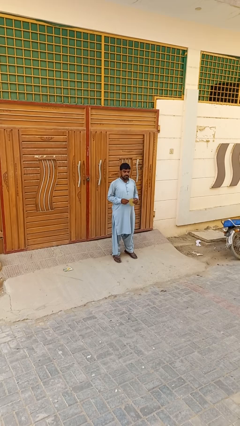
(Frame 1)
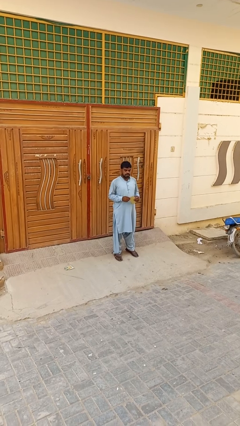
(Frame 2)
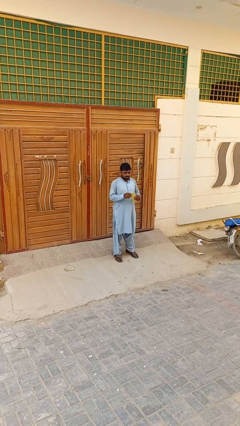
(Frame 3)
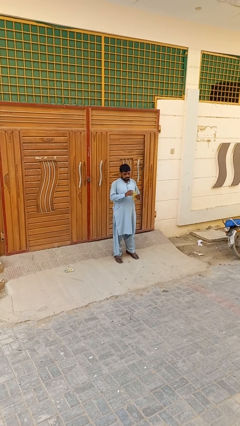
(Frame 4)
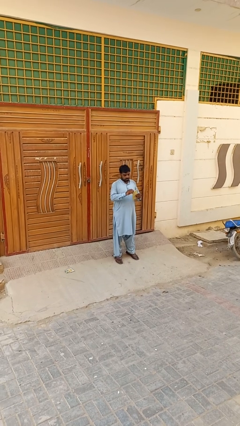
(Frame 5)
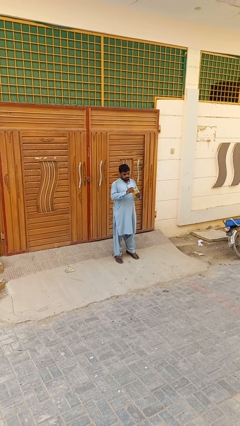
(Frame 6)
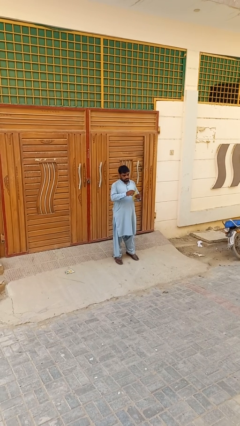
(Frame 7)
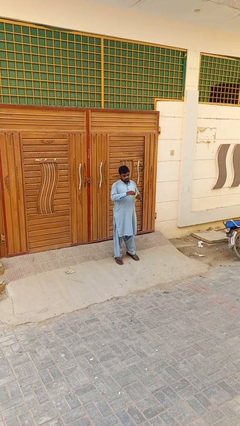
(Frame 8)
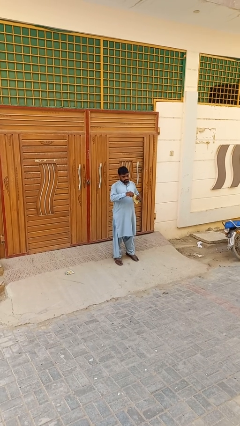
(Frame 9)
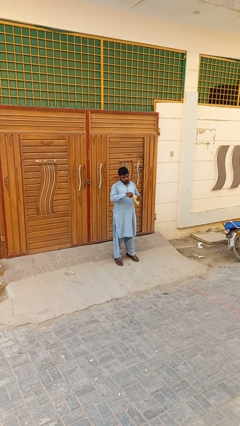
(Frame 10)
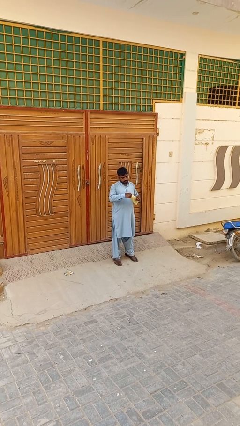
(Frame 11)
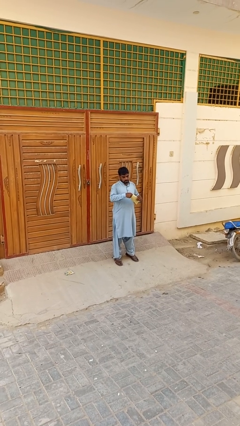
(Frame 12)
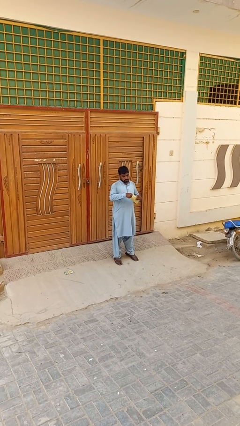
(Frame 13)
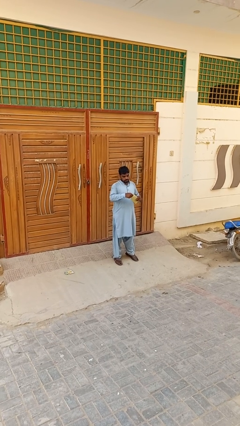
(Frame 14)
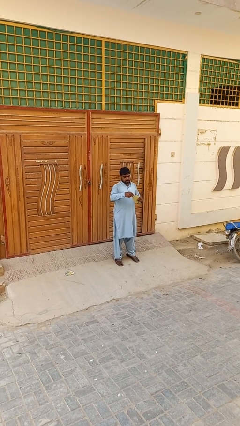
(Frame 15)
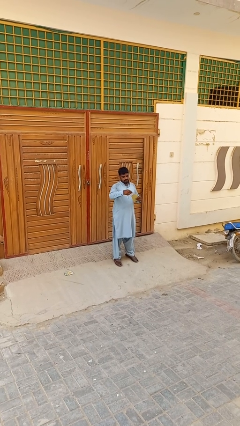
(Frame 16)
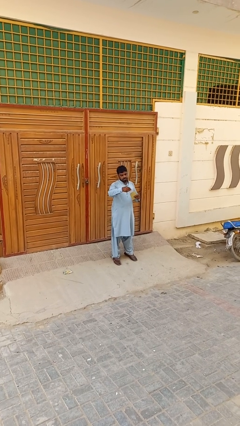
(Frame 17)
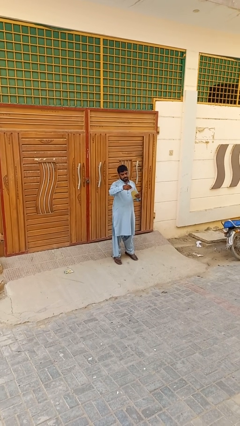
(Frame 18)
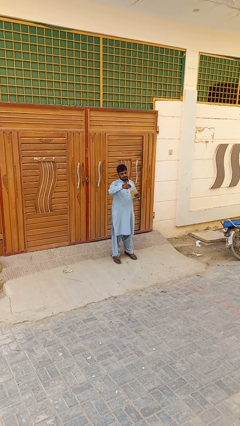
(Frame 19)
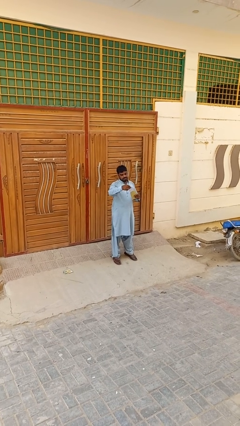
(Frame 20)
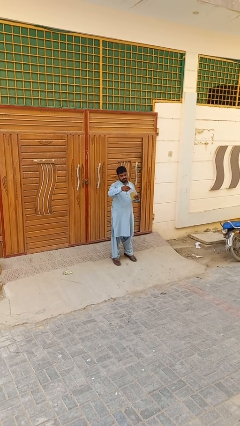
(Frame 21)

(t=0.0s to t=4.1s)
person opens mailbox

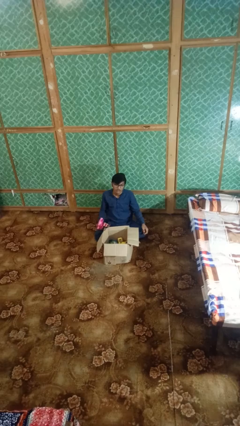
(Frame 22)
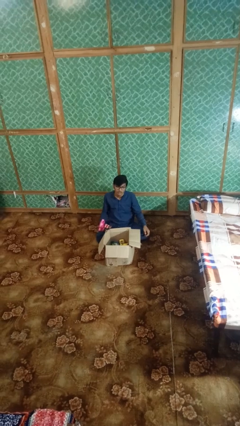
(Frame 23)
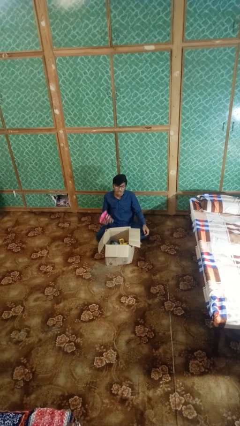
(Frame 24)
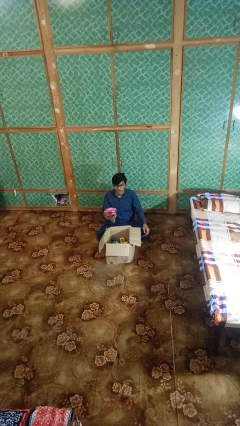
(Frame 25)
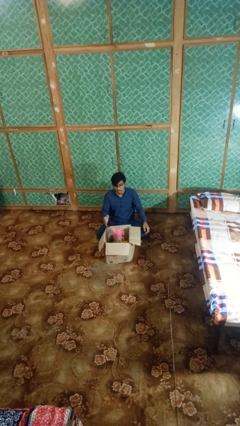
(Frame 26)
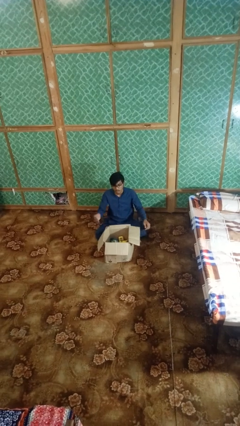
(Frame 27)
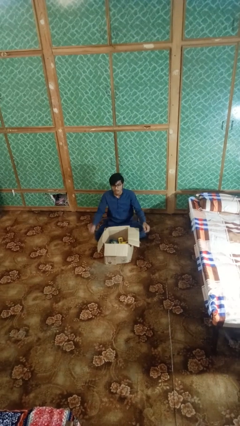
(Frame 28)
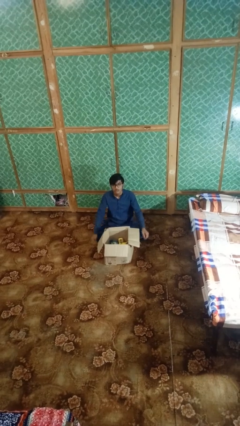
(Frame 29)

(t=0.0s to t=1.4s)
person puts object into box

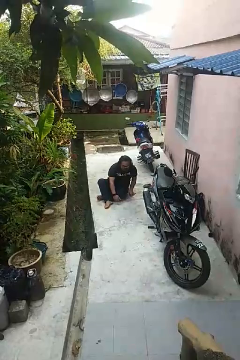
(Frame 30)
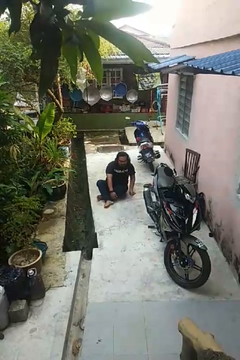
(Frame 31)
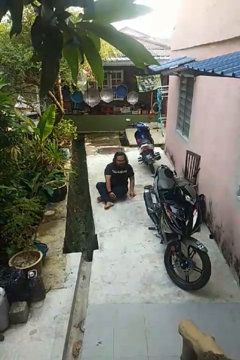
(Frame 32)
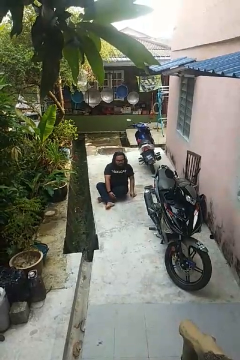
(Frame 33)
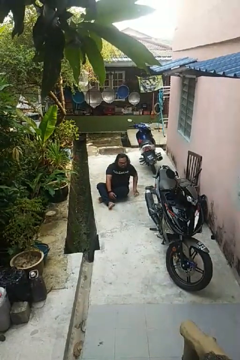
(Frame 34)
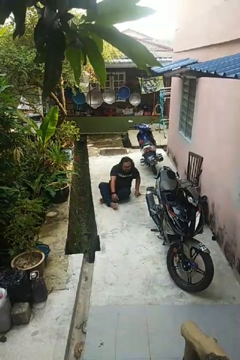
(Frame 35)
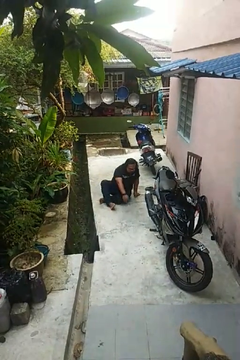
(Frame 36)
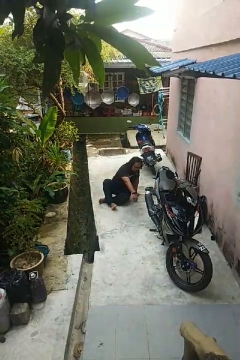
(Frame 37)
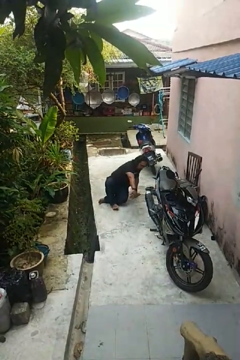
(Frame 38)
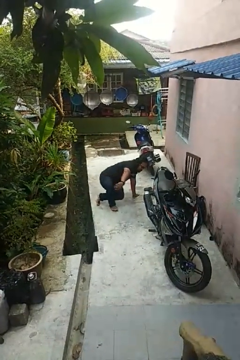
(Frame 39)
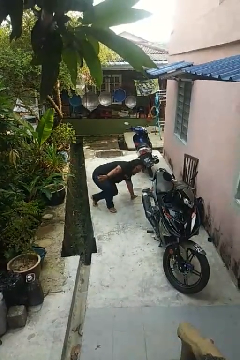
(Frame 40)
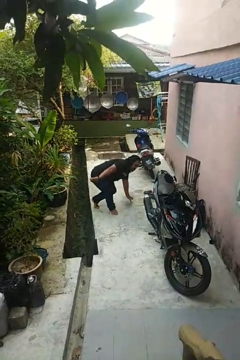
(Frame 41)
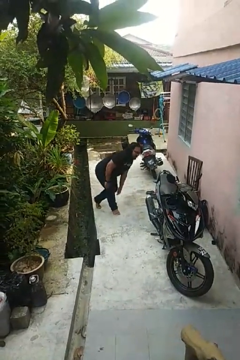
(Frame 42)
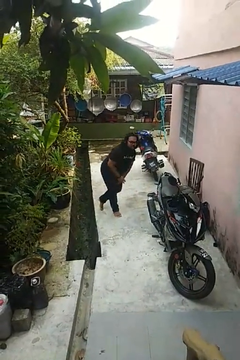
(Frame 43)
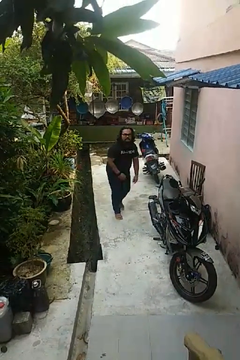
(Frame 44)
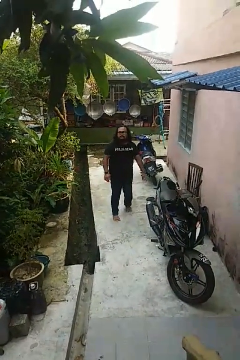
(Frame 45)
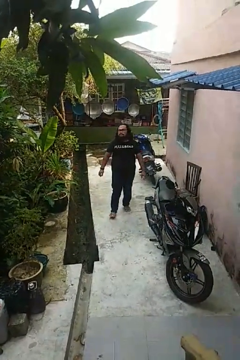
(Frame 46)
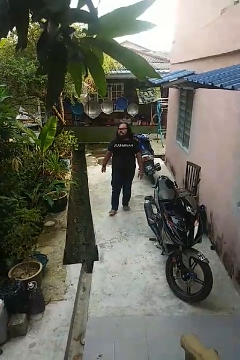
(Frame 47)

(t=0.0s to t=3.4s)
person stands up from floor

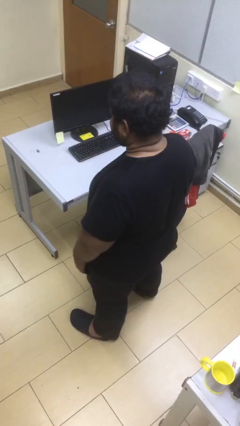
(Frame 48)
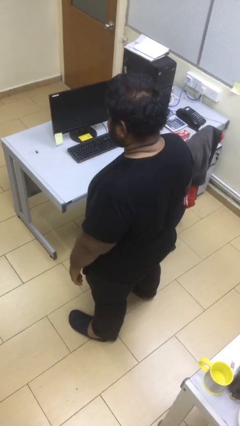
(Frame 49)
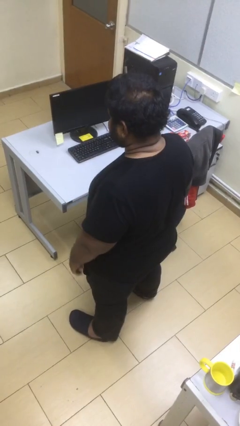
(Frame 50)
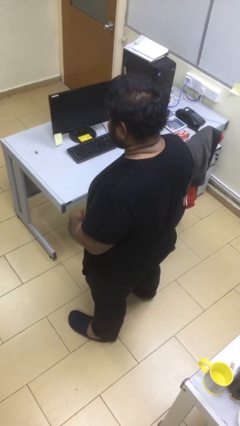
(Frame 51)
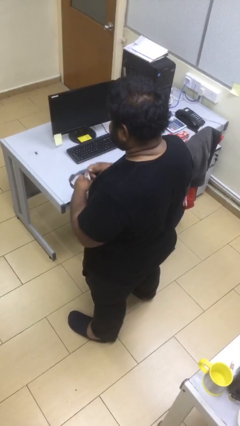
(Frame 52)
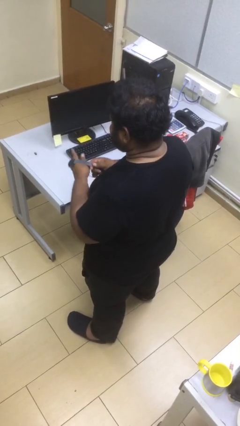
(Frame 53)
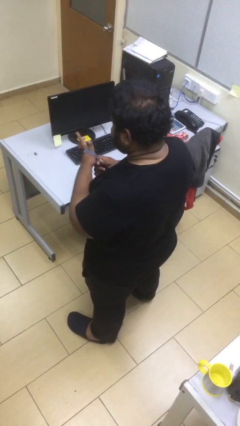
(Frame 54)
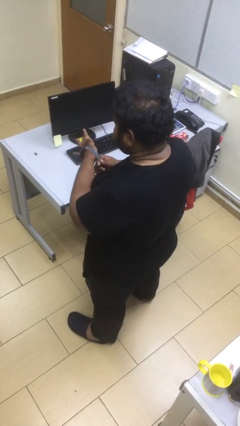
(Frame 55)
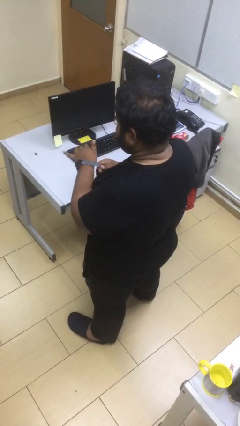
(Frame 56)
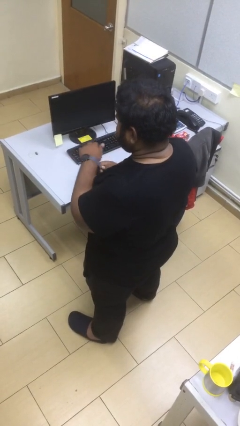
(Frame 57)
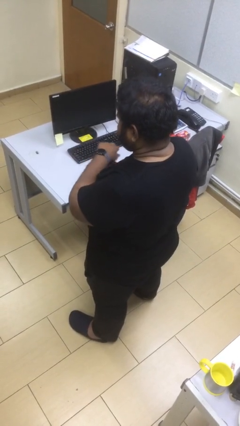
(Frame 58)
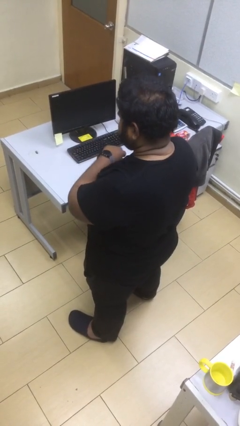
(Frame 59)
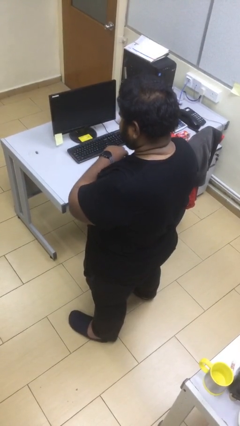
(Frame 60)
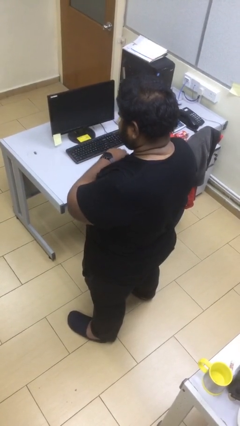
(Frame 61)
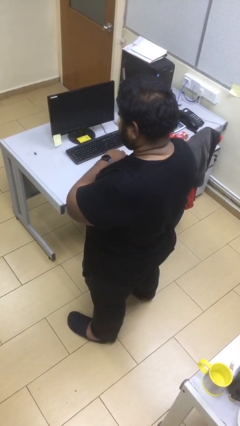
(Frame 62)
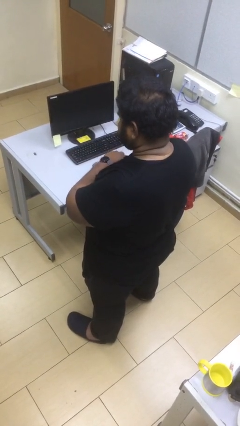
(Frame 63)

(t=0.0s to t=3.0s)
person puts on wristwatch

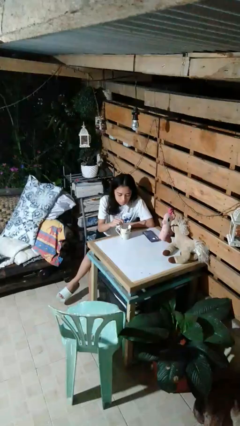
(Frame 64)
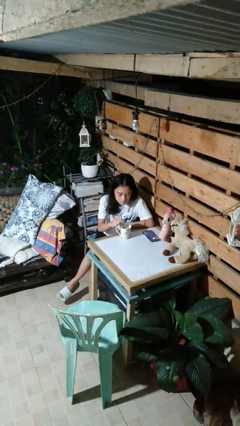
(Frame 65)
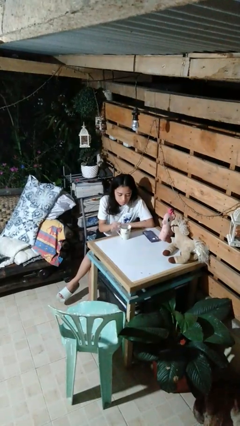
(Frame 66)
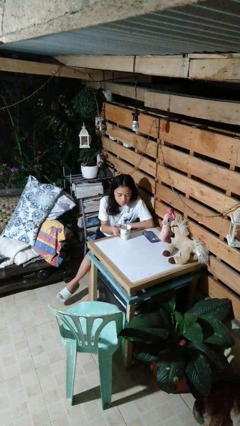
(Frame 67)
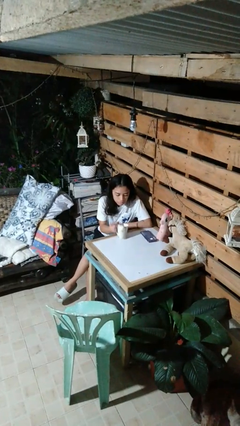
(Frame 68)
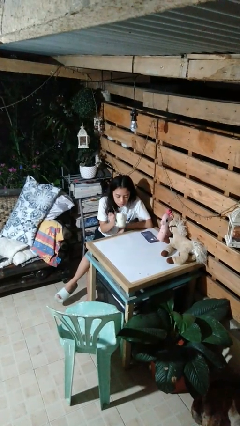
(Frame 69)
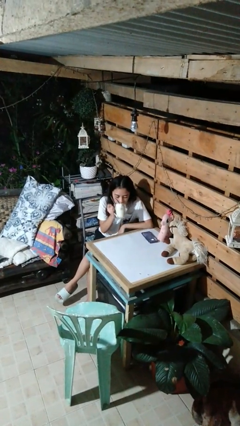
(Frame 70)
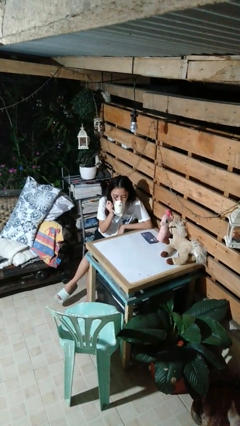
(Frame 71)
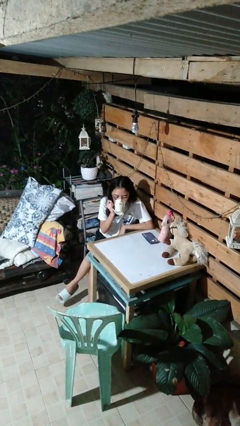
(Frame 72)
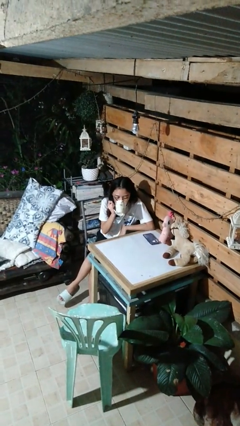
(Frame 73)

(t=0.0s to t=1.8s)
person drinks from mug

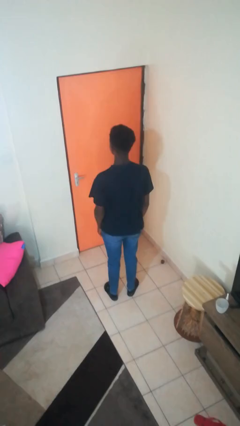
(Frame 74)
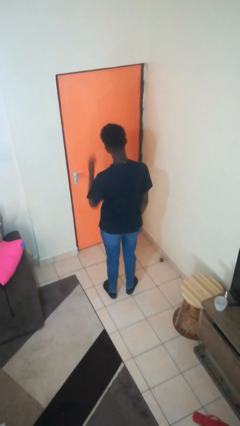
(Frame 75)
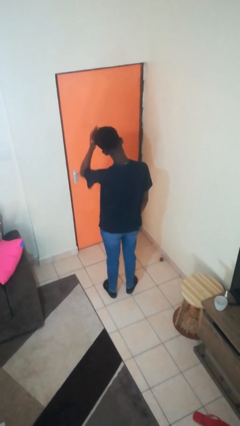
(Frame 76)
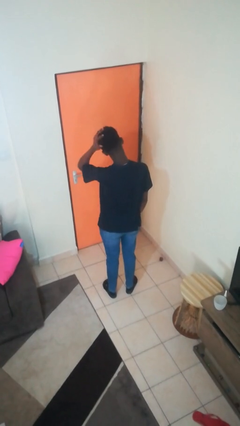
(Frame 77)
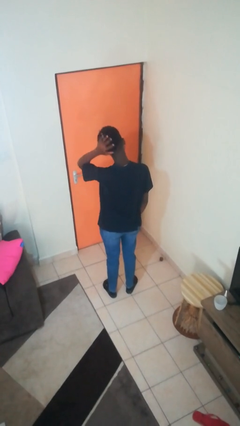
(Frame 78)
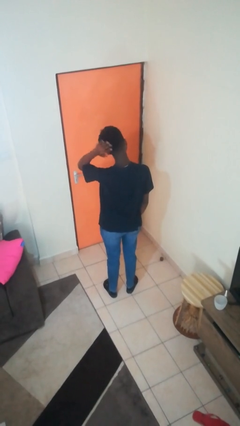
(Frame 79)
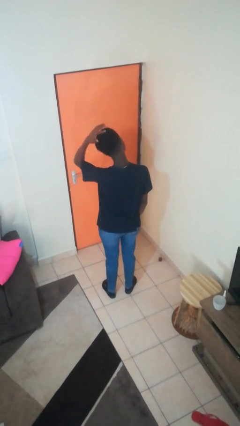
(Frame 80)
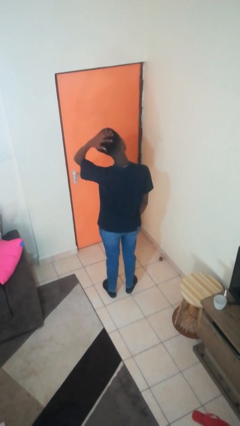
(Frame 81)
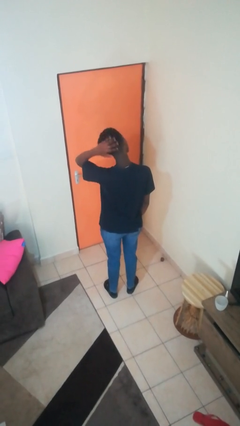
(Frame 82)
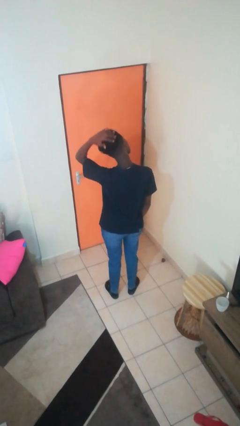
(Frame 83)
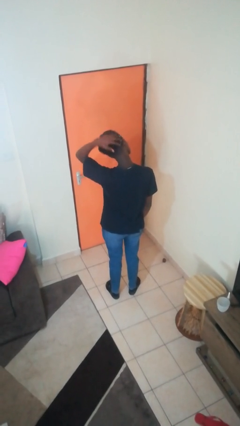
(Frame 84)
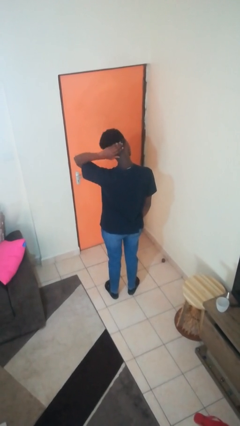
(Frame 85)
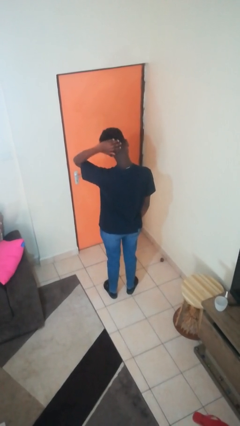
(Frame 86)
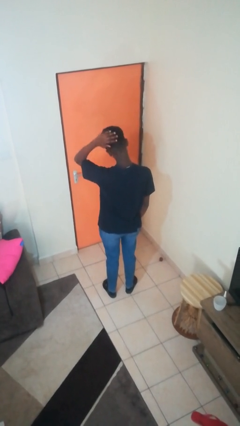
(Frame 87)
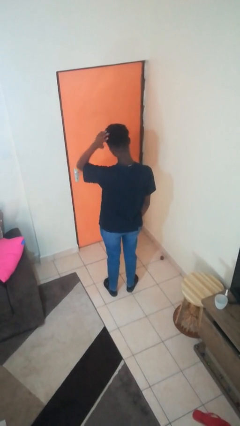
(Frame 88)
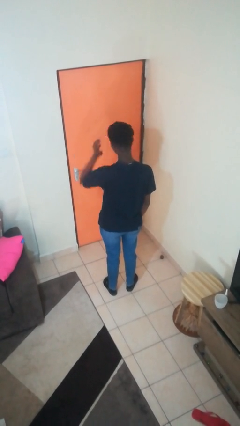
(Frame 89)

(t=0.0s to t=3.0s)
person strokes hair

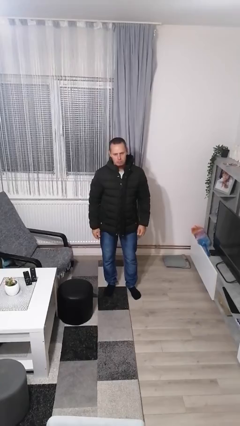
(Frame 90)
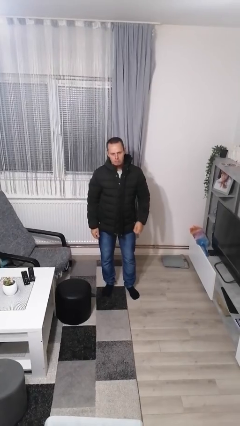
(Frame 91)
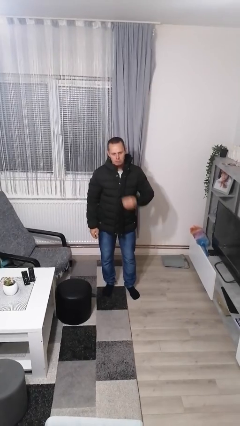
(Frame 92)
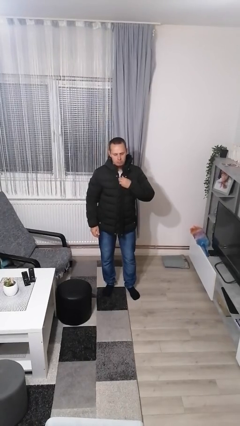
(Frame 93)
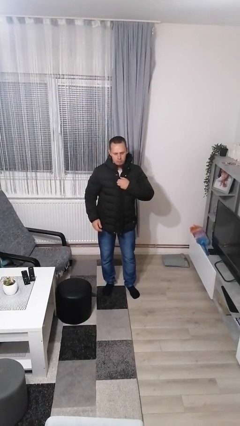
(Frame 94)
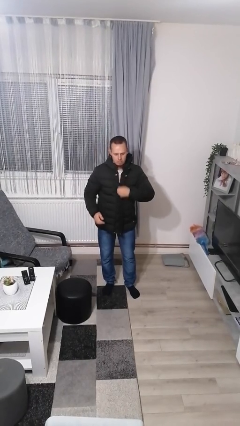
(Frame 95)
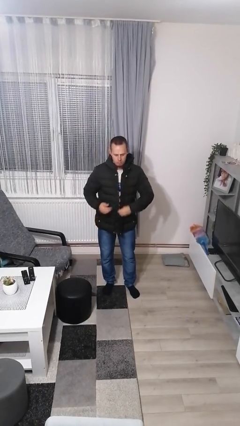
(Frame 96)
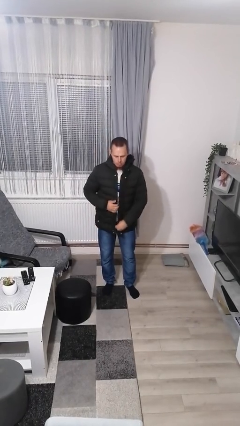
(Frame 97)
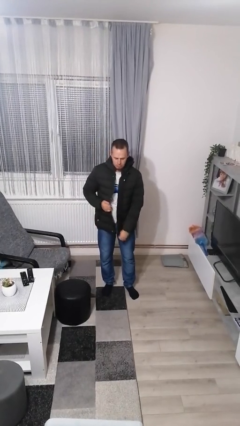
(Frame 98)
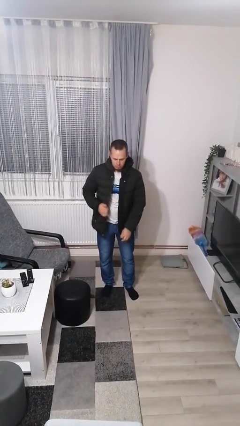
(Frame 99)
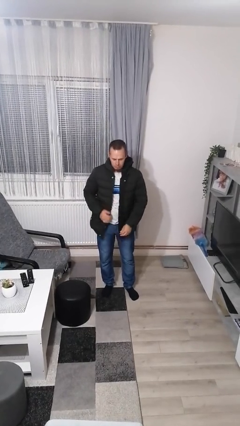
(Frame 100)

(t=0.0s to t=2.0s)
person unzips jacket
